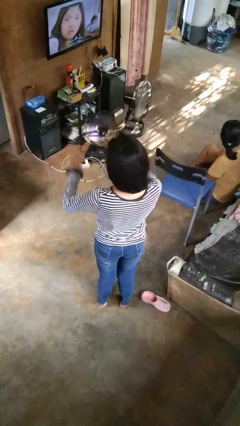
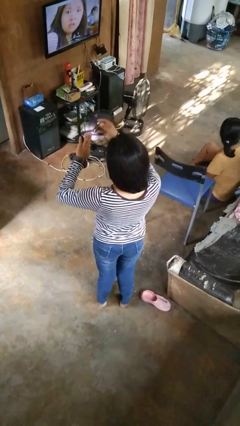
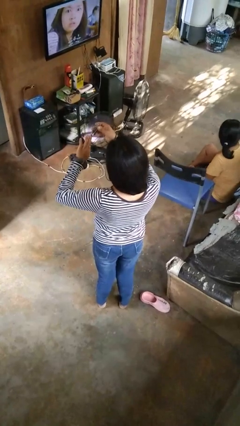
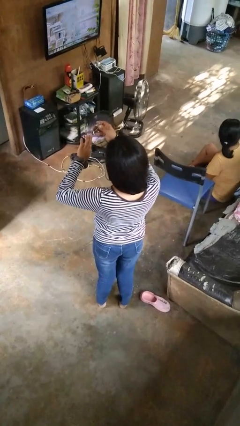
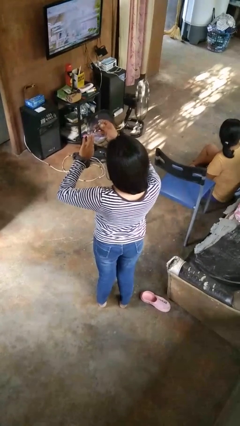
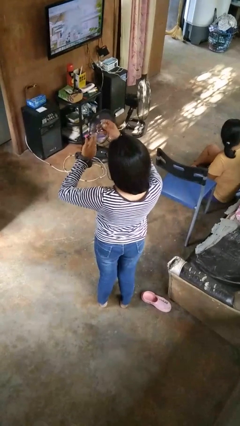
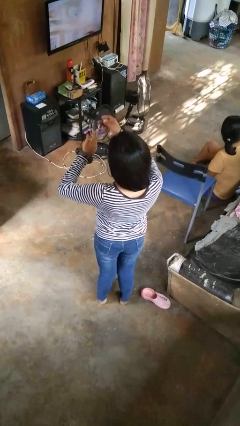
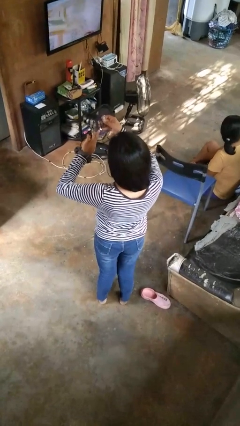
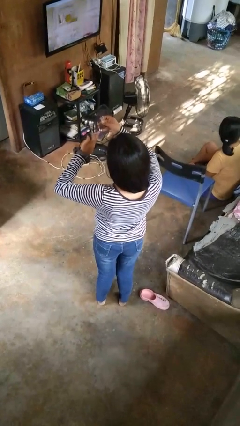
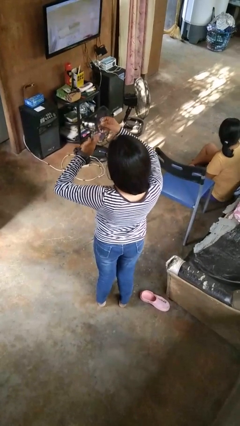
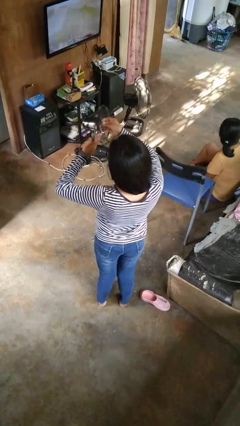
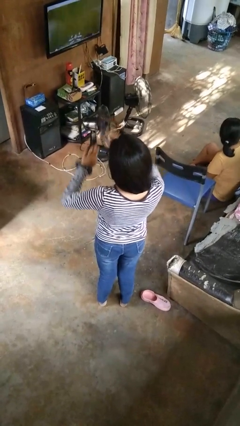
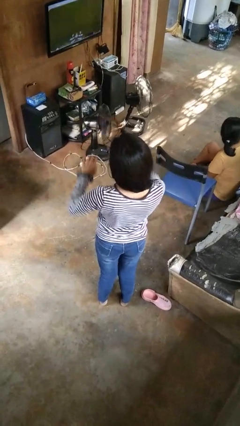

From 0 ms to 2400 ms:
person clips fingernails

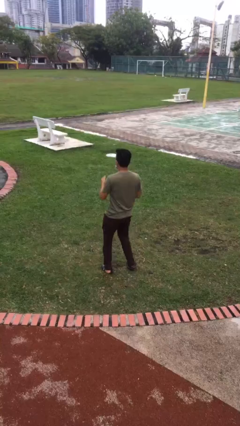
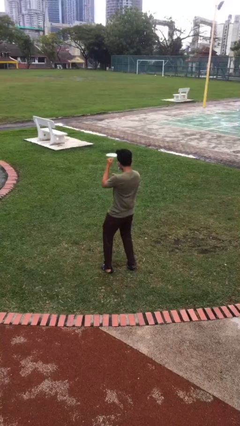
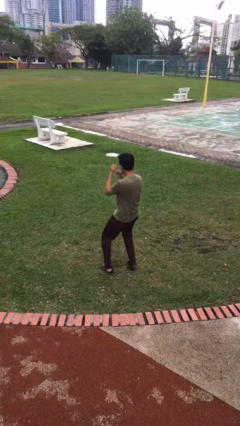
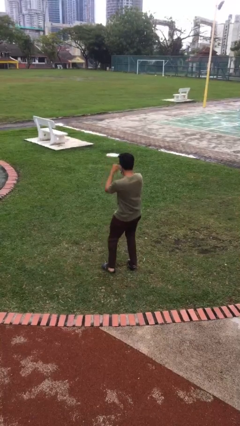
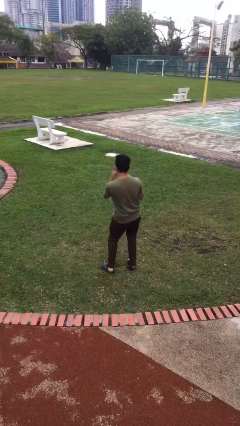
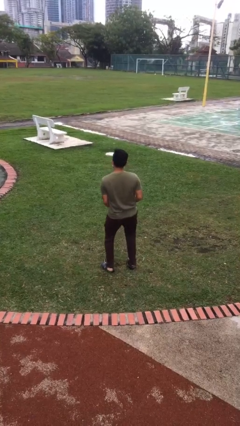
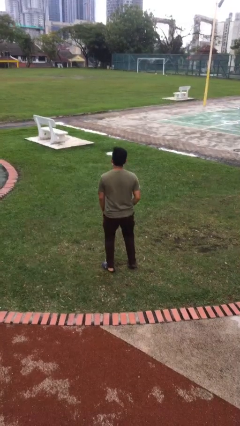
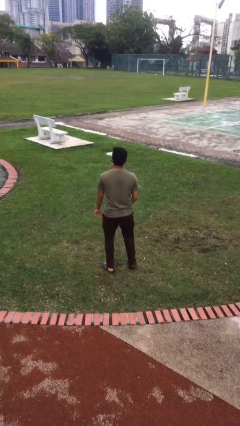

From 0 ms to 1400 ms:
person dances in place

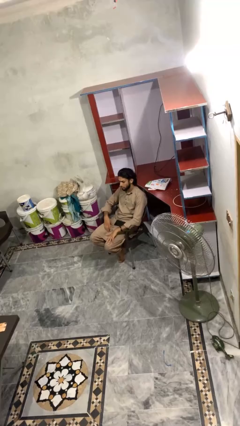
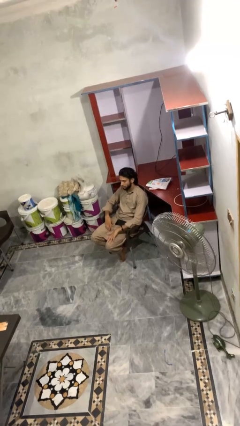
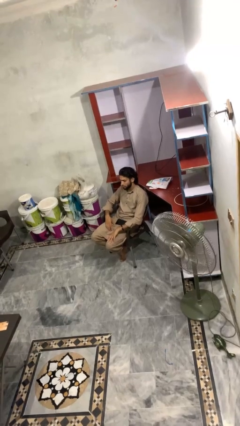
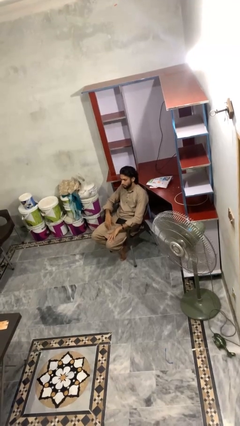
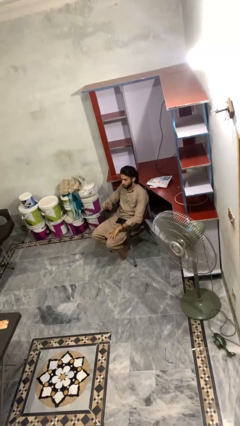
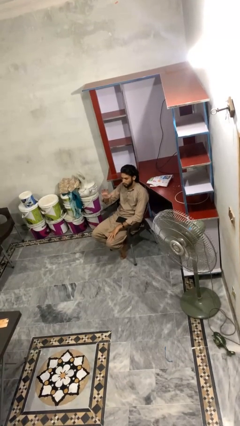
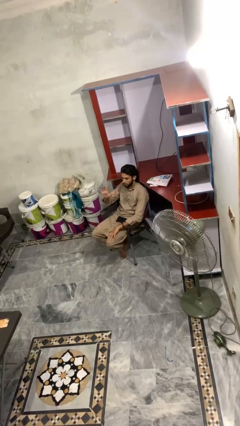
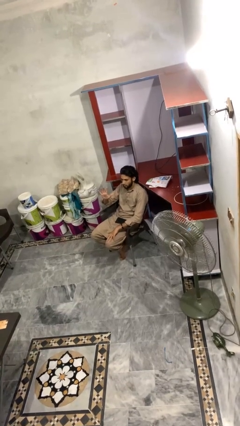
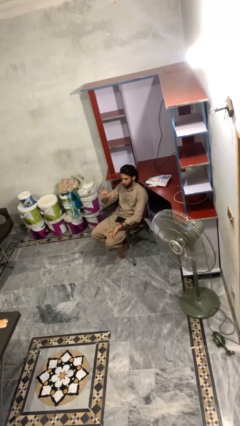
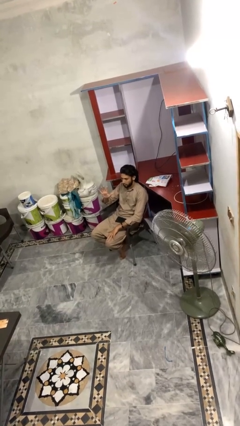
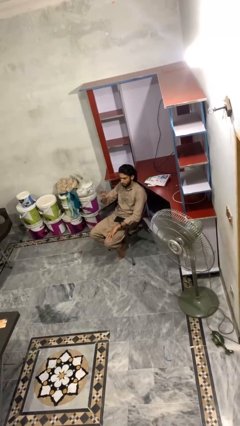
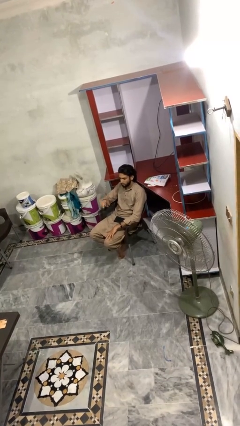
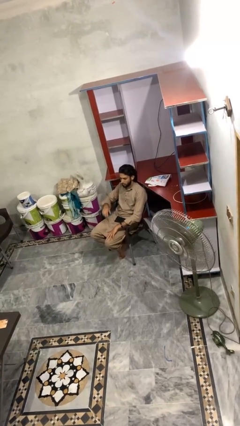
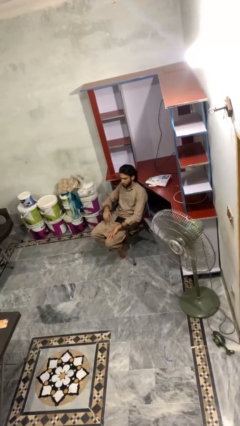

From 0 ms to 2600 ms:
person gestures number five

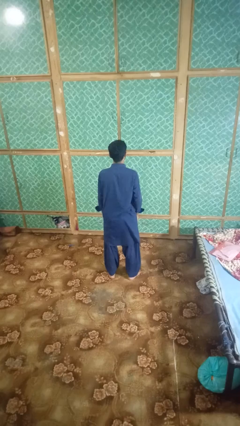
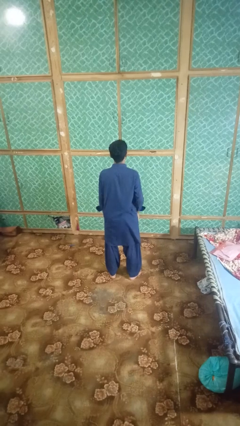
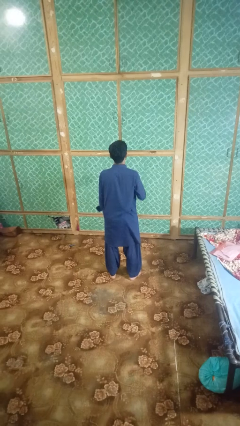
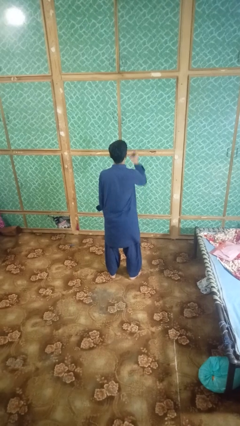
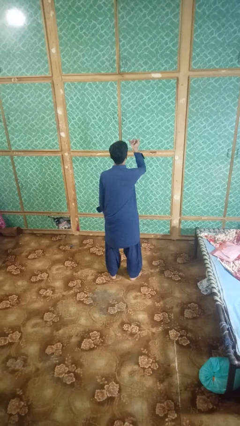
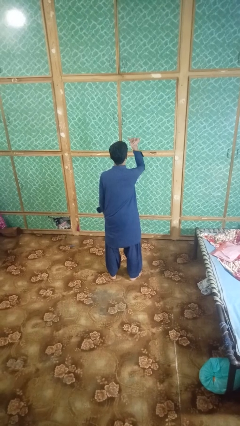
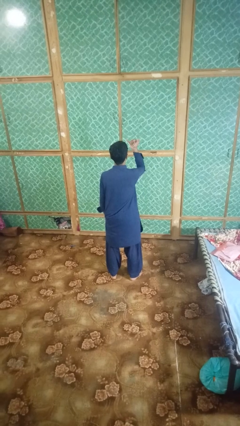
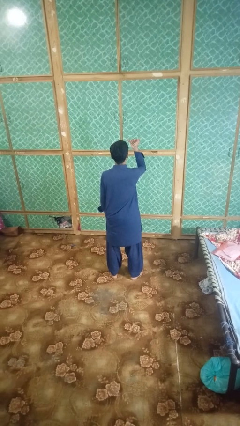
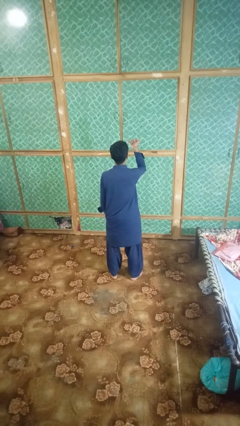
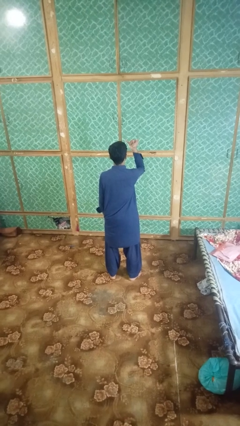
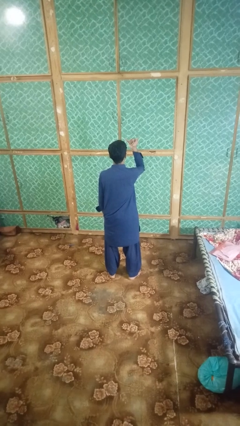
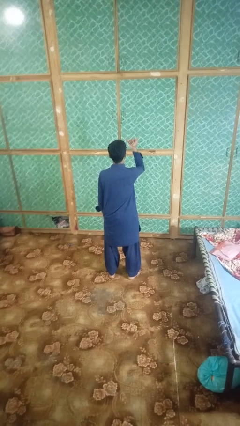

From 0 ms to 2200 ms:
person gestures hang loose

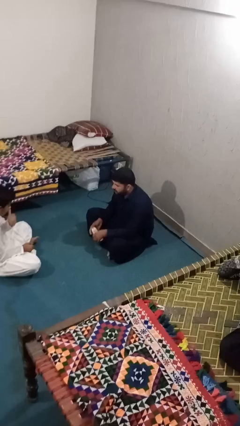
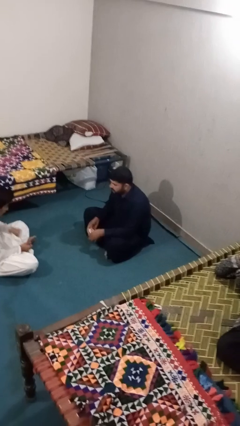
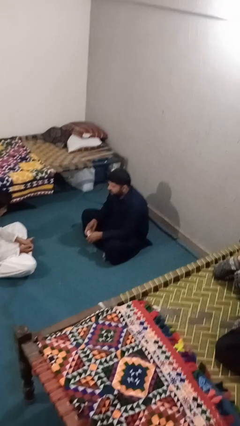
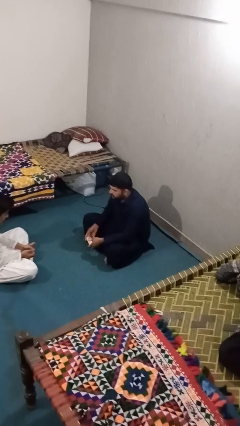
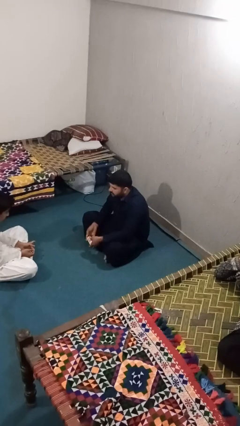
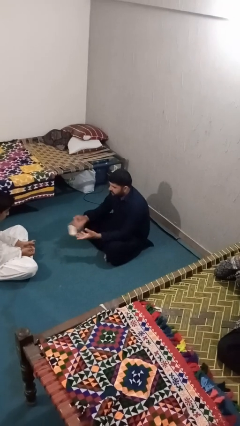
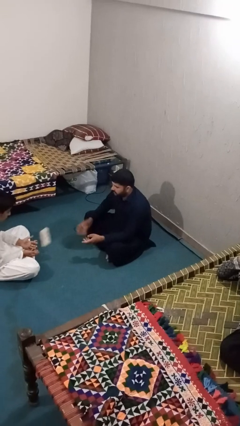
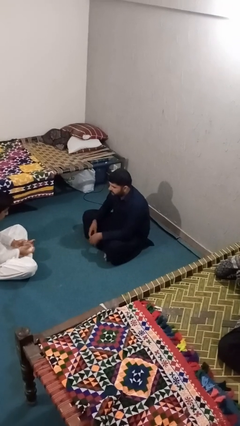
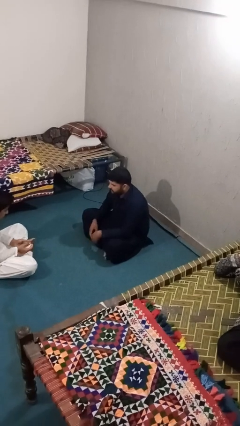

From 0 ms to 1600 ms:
person throws object to person

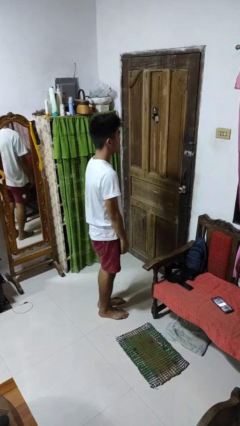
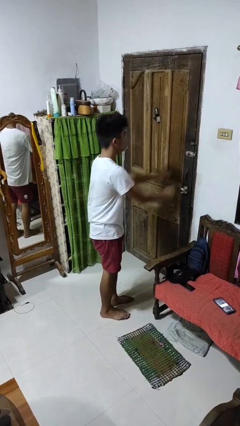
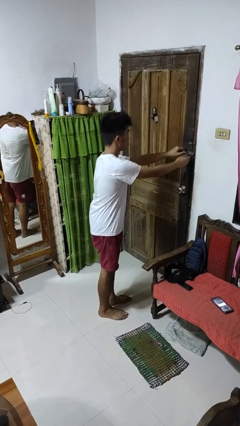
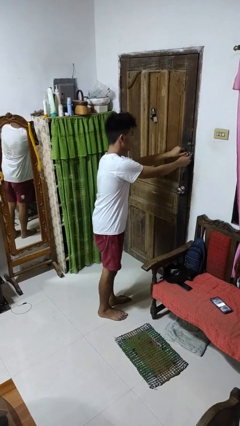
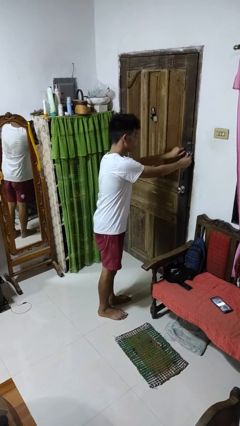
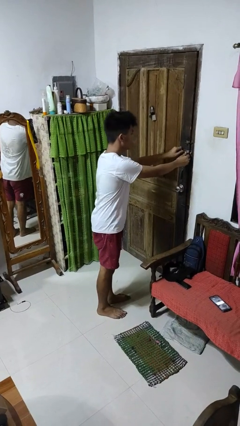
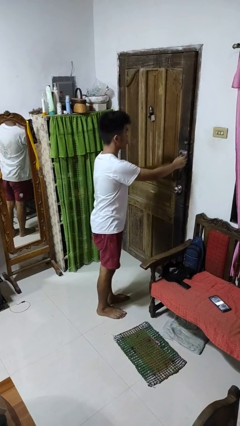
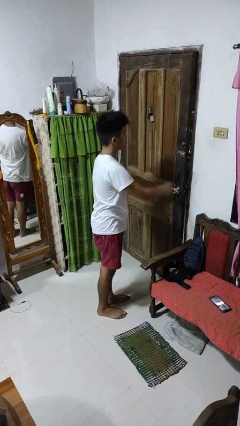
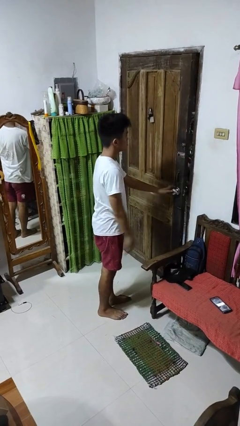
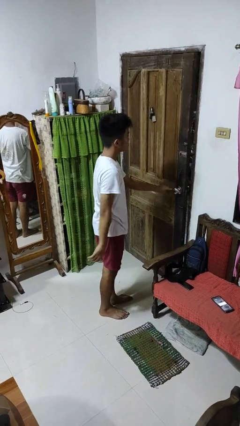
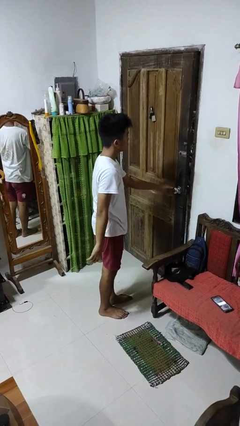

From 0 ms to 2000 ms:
person unlocks door with keys

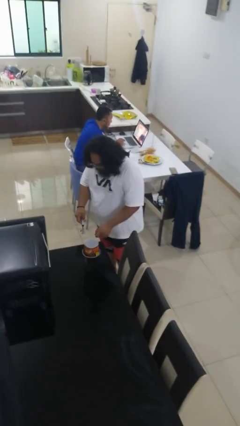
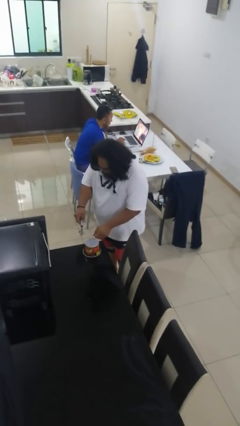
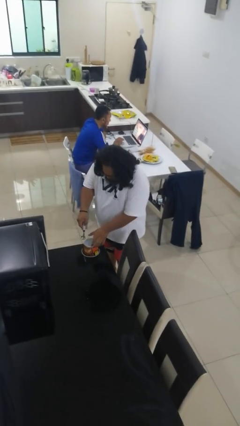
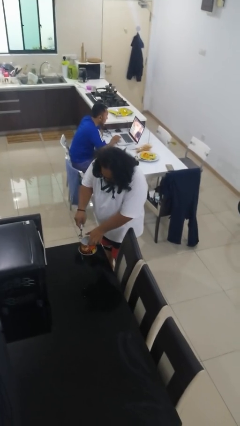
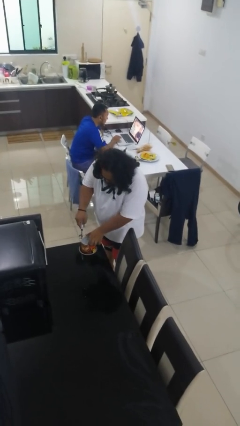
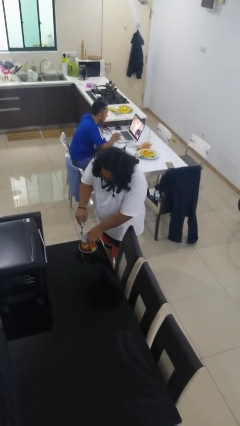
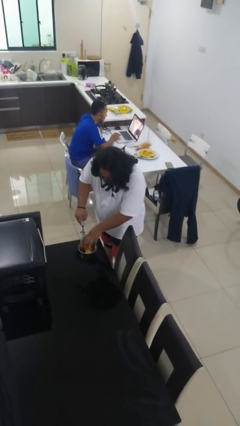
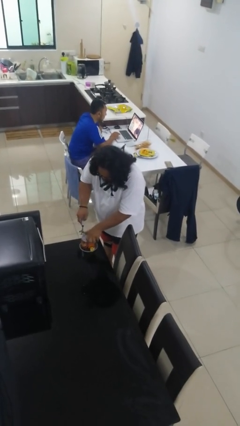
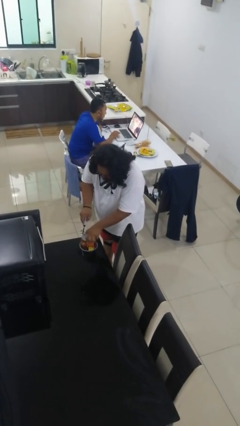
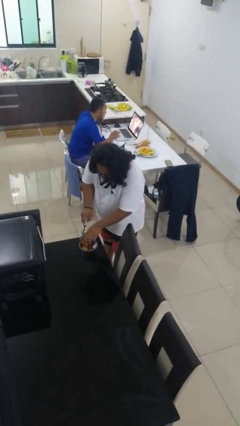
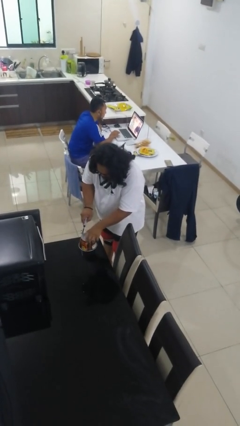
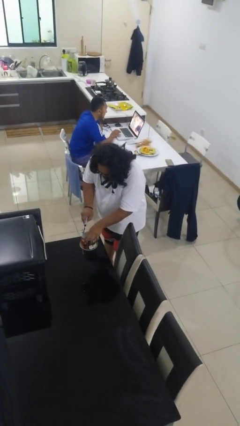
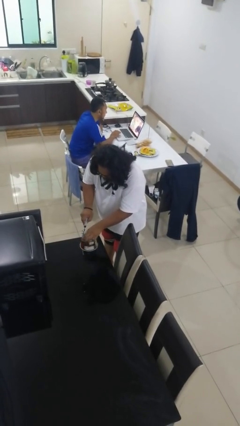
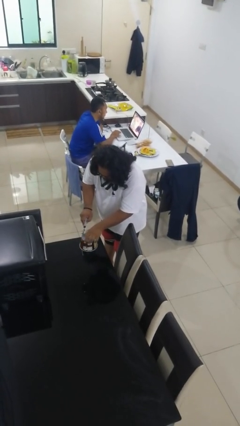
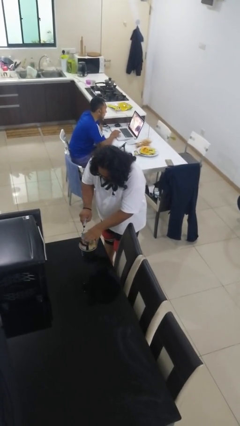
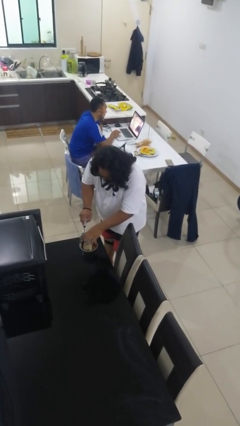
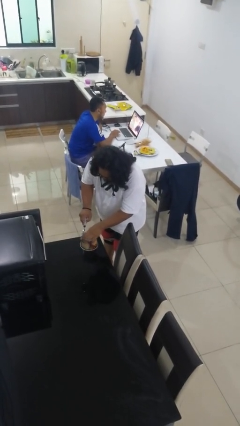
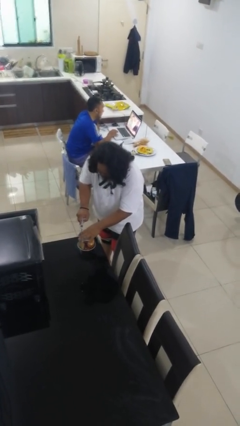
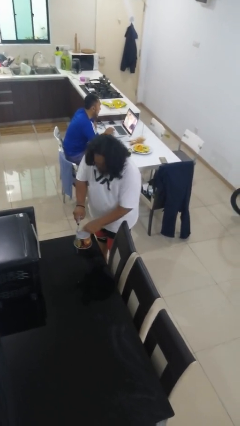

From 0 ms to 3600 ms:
person opens can with can opener

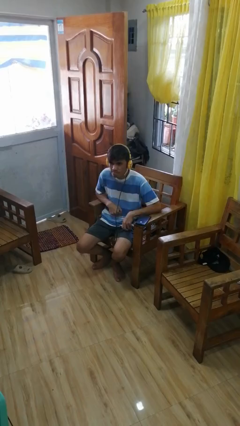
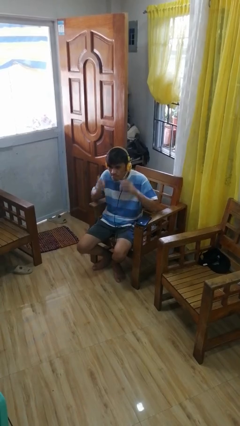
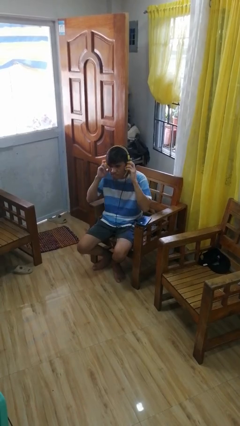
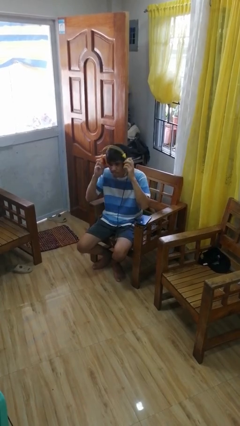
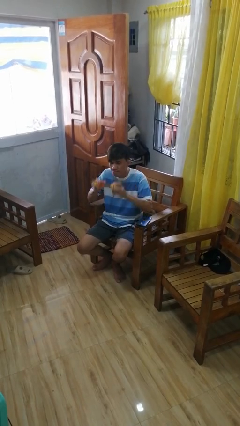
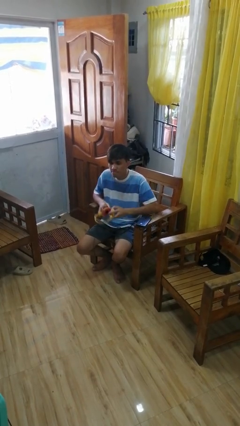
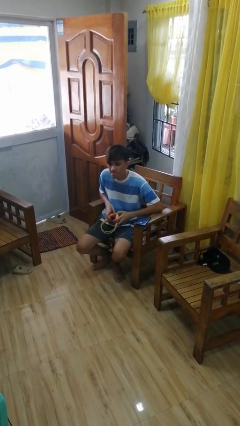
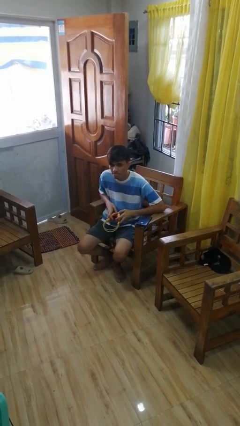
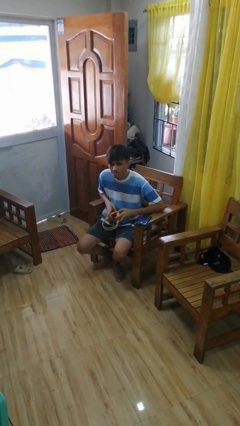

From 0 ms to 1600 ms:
person takes off headphones
